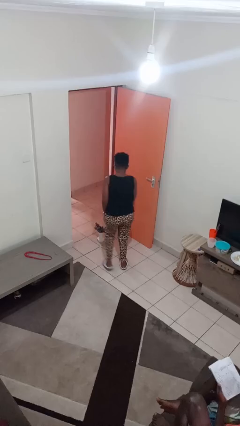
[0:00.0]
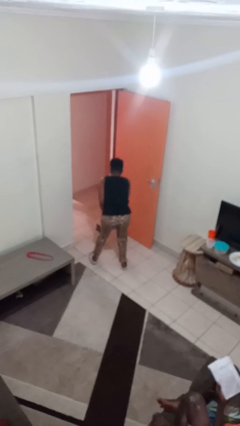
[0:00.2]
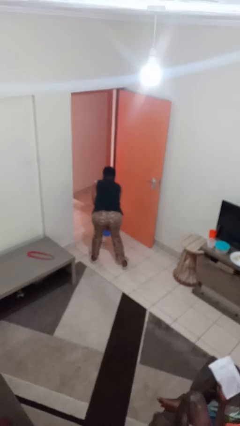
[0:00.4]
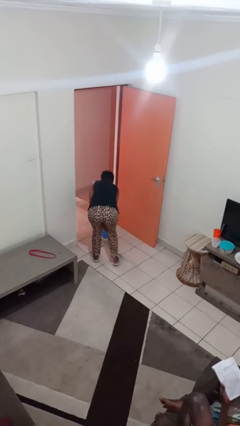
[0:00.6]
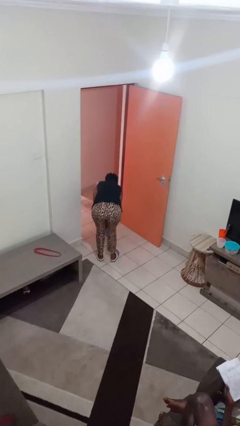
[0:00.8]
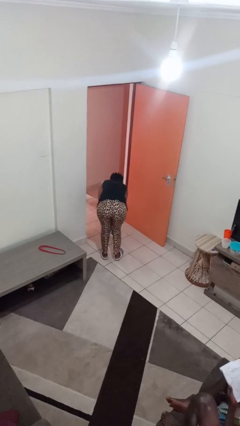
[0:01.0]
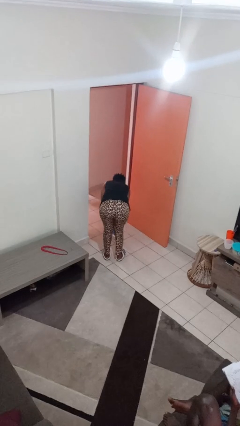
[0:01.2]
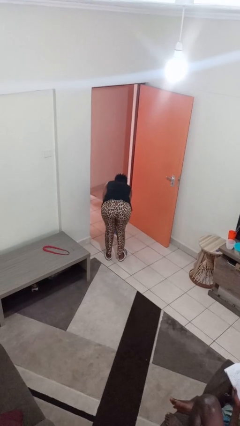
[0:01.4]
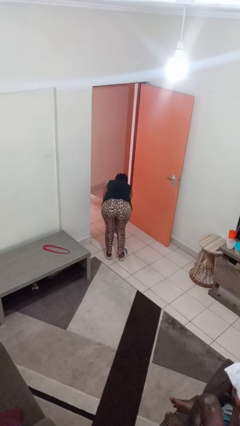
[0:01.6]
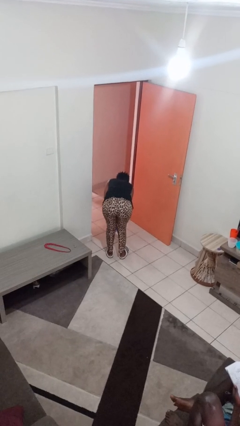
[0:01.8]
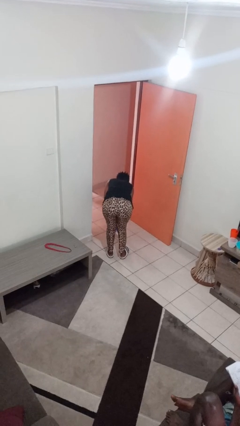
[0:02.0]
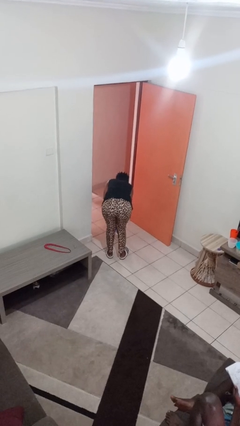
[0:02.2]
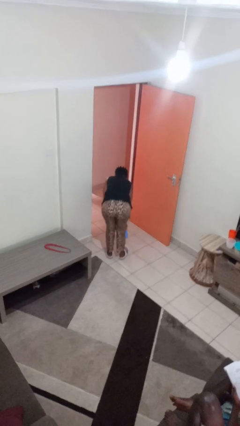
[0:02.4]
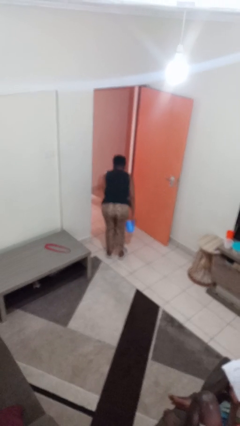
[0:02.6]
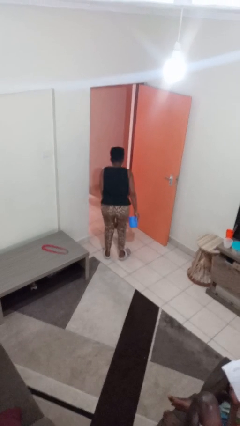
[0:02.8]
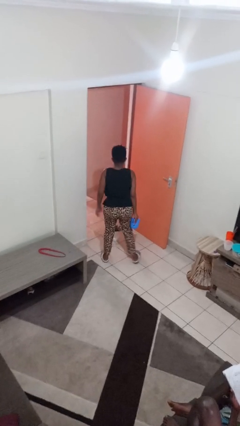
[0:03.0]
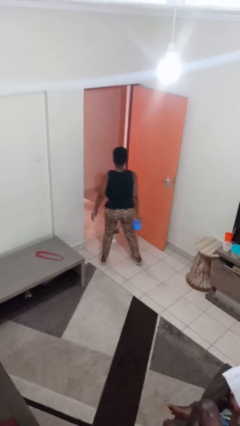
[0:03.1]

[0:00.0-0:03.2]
person waters houseplant

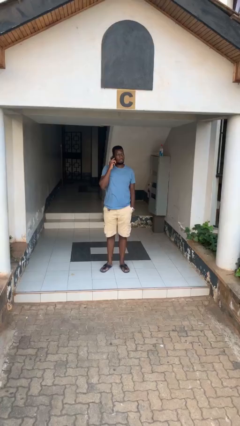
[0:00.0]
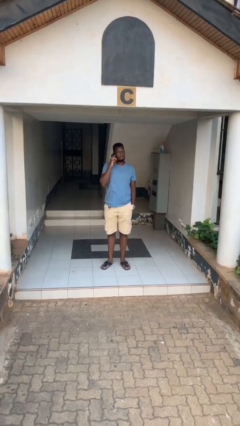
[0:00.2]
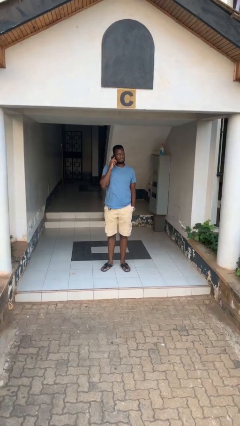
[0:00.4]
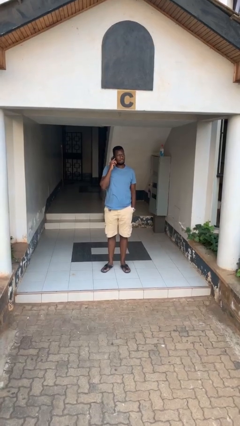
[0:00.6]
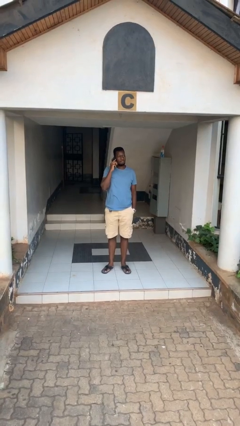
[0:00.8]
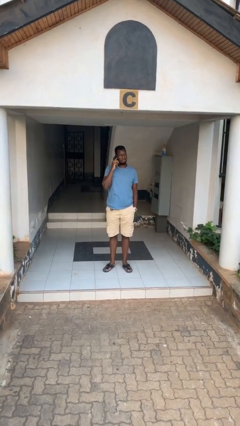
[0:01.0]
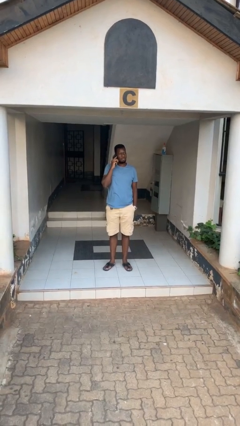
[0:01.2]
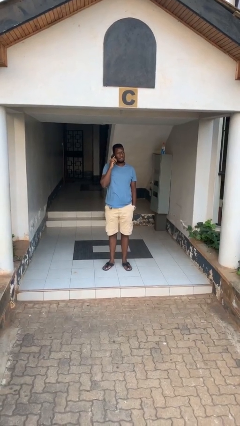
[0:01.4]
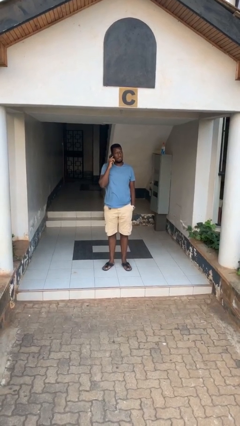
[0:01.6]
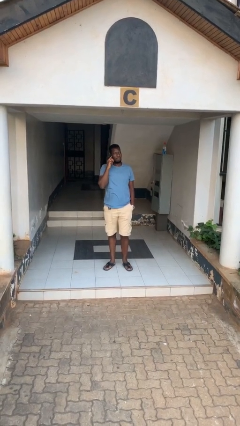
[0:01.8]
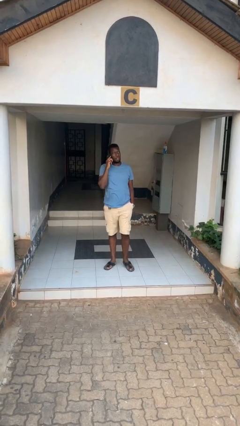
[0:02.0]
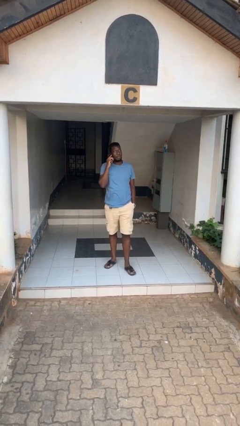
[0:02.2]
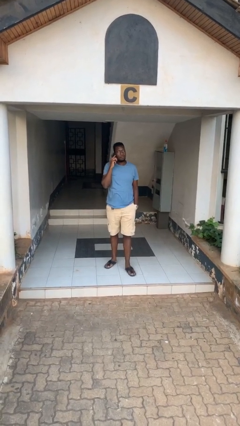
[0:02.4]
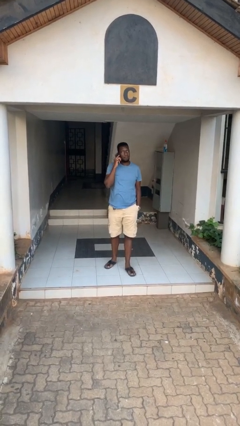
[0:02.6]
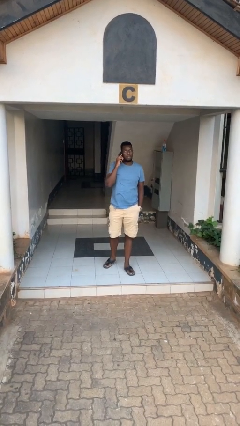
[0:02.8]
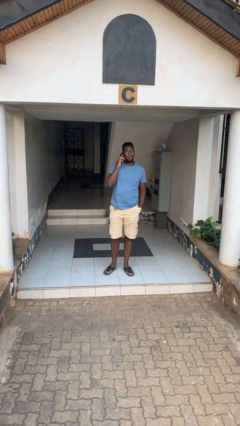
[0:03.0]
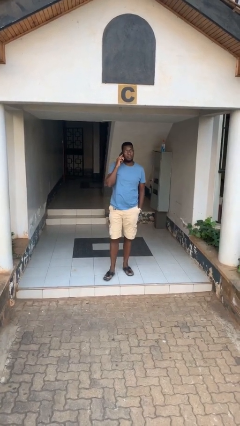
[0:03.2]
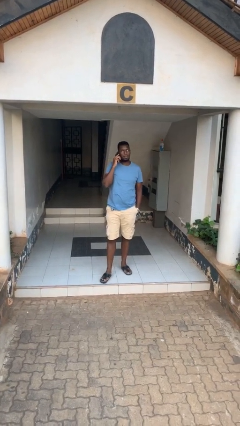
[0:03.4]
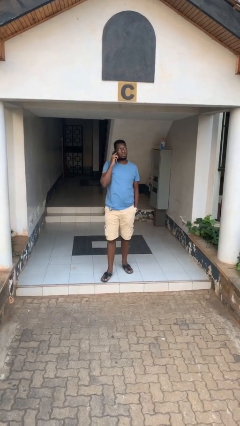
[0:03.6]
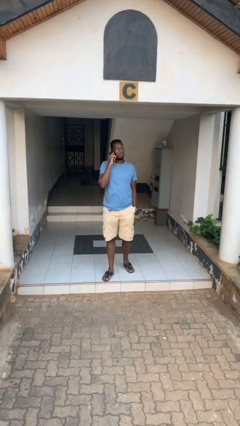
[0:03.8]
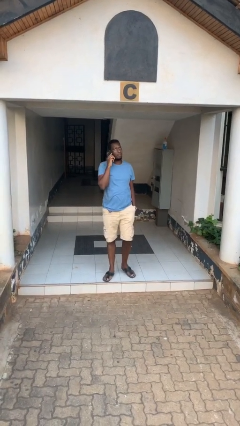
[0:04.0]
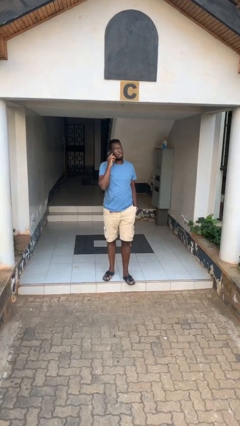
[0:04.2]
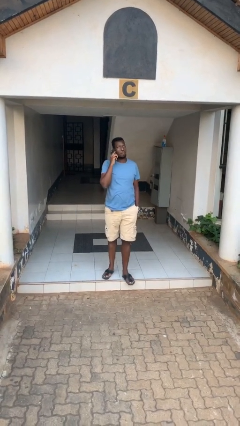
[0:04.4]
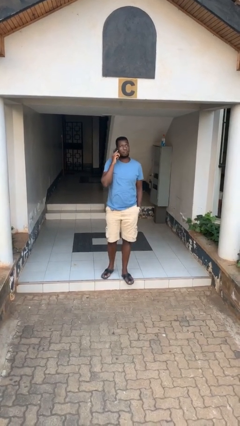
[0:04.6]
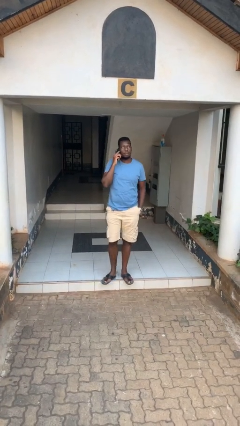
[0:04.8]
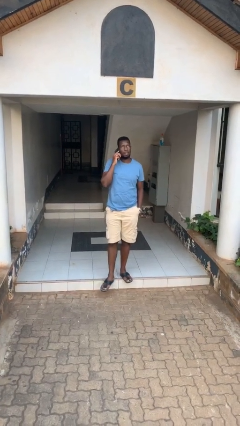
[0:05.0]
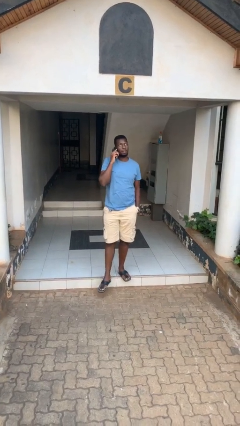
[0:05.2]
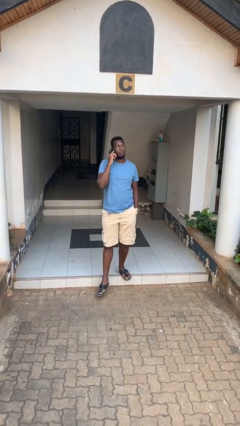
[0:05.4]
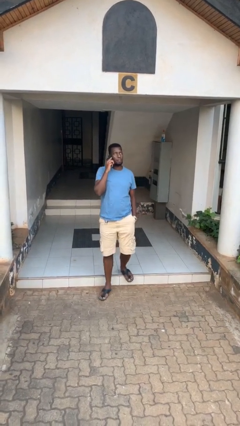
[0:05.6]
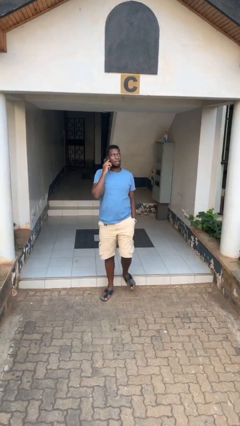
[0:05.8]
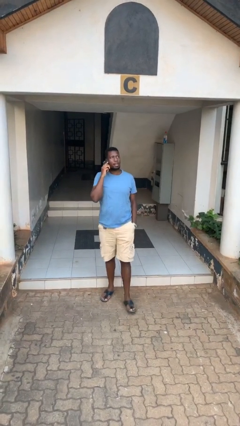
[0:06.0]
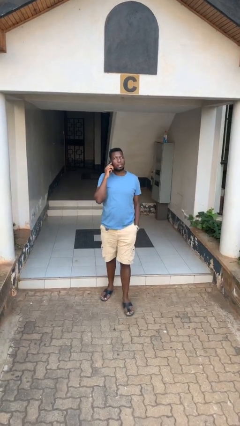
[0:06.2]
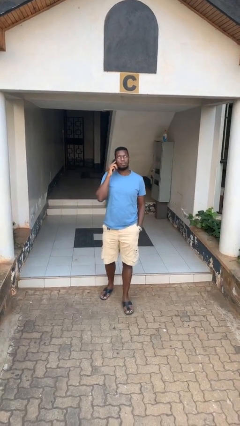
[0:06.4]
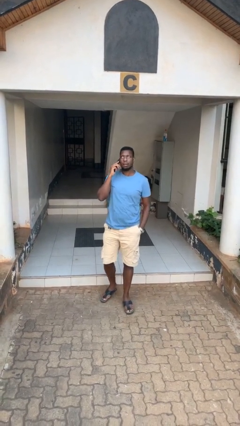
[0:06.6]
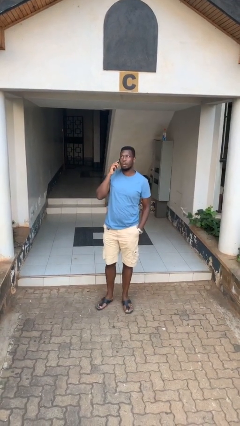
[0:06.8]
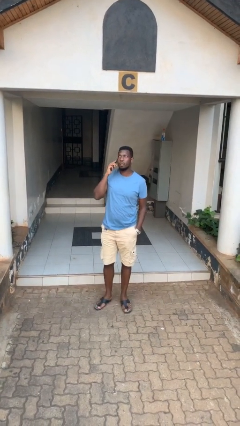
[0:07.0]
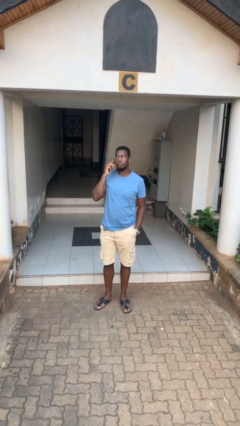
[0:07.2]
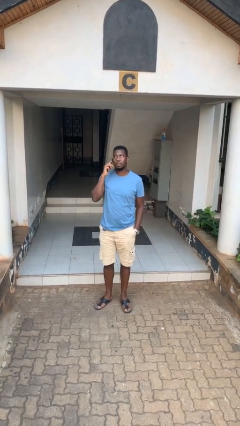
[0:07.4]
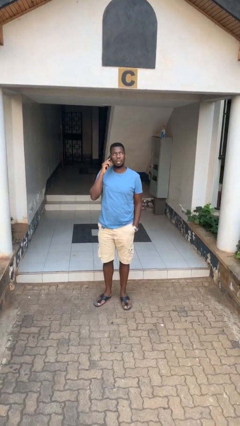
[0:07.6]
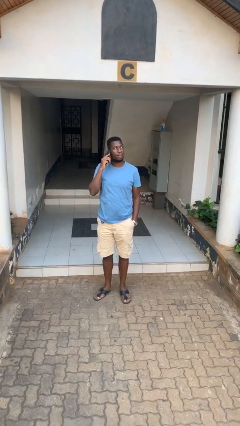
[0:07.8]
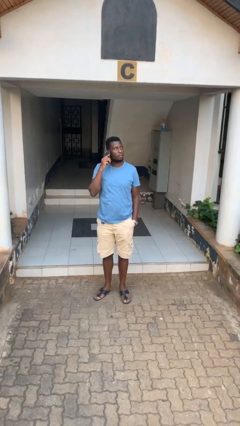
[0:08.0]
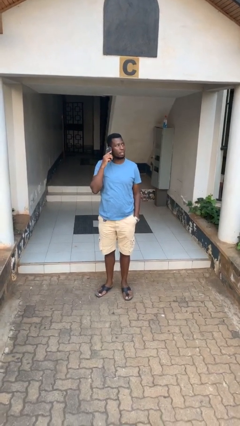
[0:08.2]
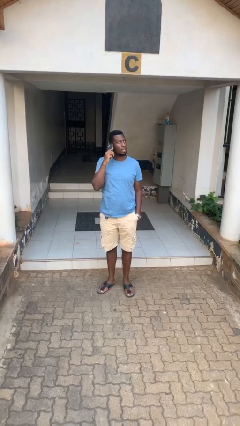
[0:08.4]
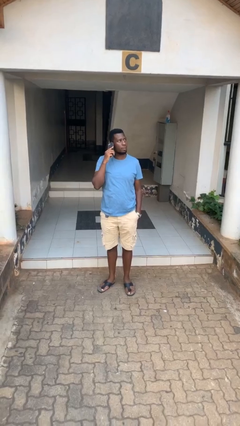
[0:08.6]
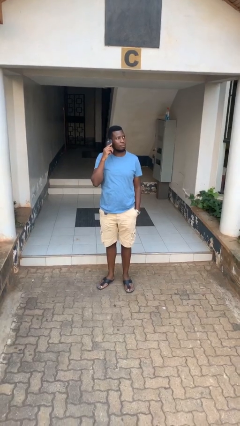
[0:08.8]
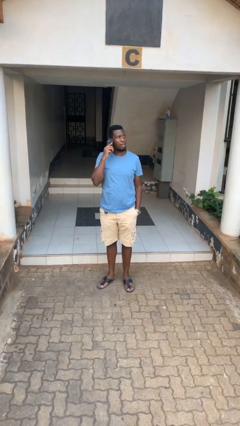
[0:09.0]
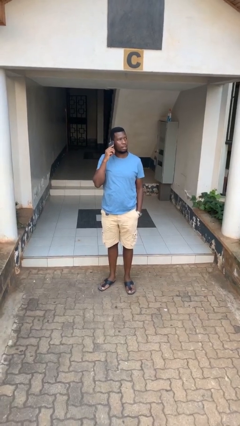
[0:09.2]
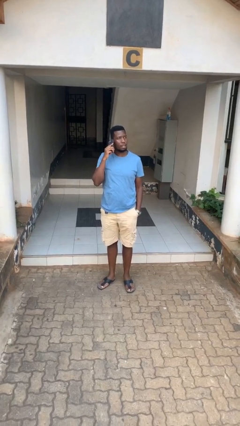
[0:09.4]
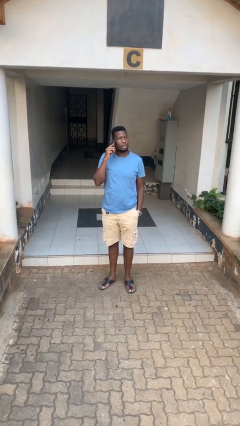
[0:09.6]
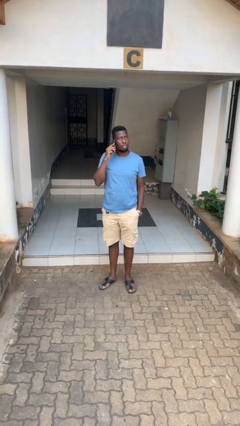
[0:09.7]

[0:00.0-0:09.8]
person enters scene through structure

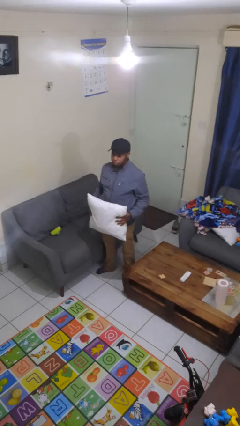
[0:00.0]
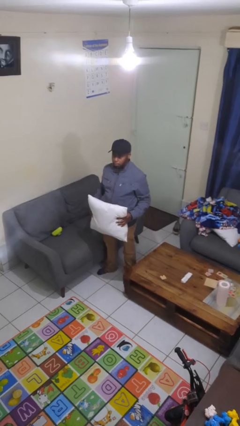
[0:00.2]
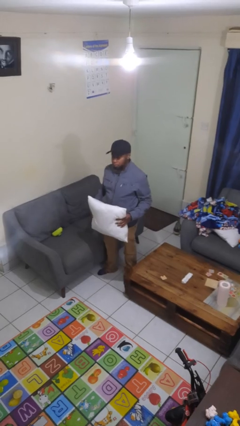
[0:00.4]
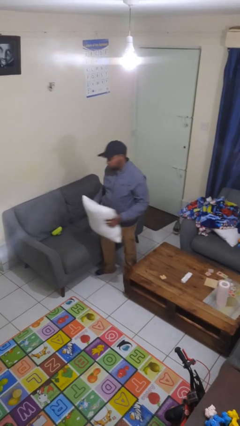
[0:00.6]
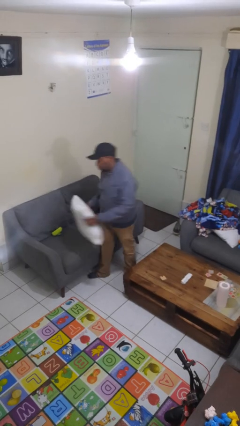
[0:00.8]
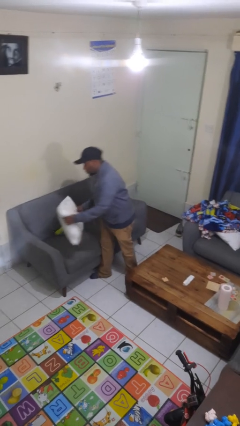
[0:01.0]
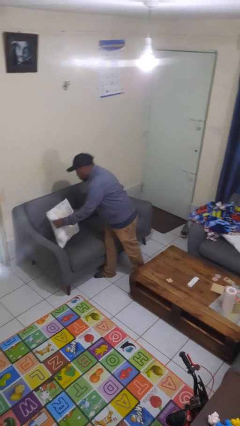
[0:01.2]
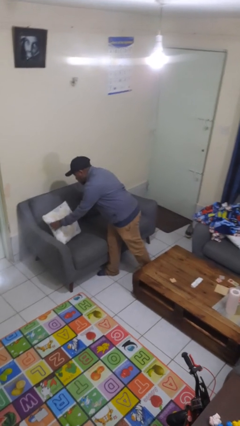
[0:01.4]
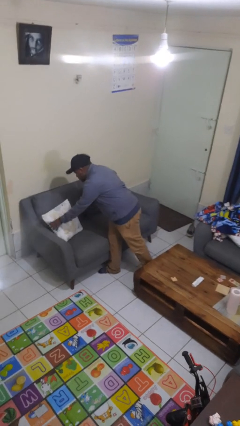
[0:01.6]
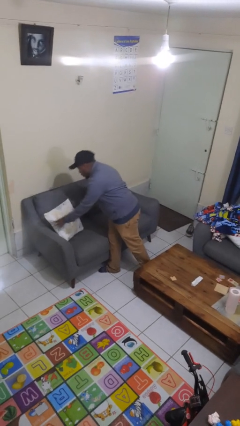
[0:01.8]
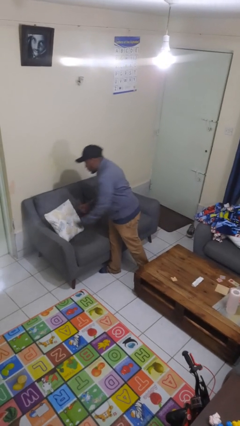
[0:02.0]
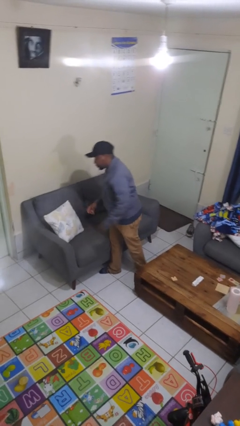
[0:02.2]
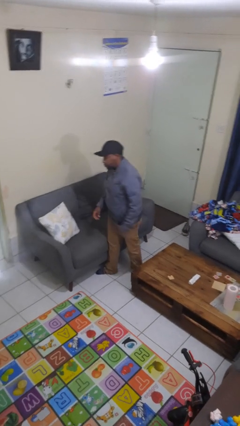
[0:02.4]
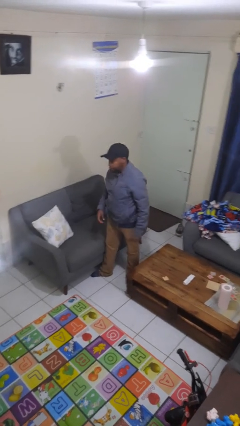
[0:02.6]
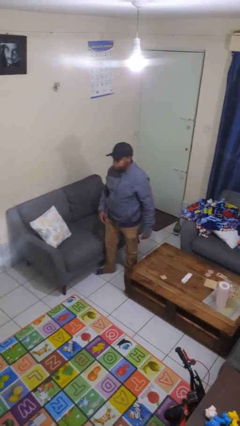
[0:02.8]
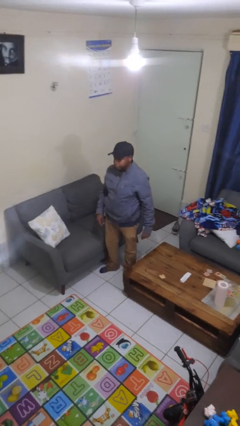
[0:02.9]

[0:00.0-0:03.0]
person puts down object on couch

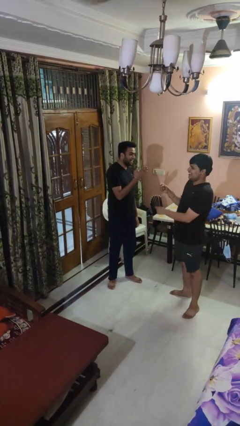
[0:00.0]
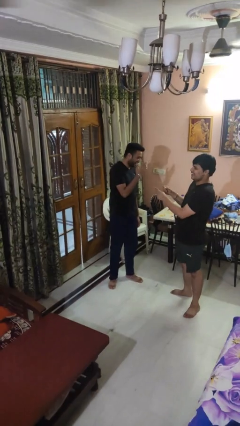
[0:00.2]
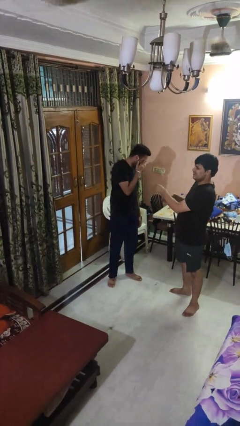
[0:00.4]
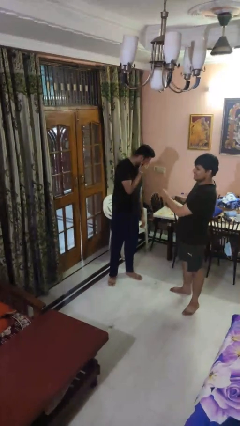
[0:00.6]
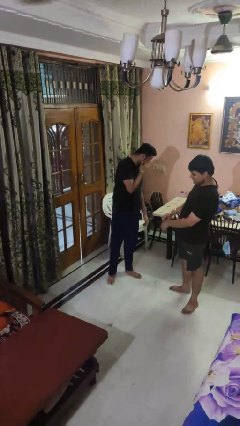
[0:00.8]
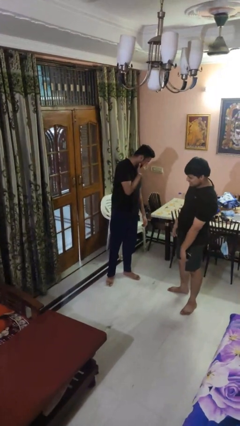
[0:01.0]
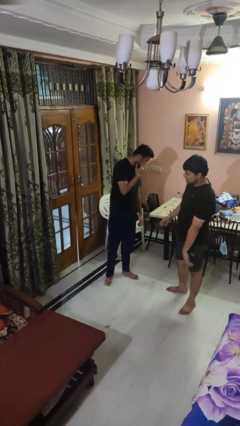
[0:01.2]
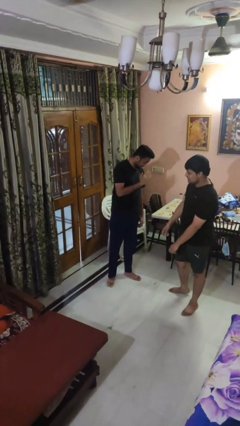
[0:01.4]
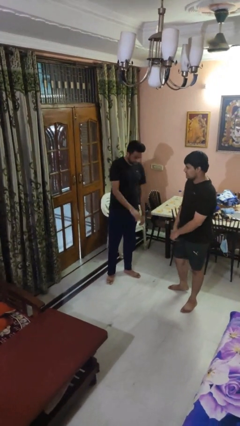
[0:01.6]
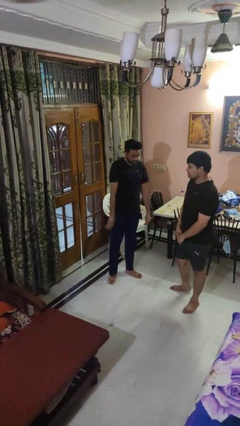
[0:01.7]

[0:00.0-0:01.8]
person laughs with person
